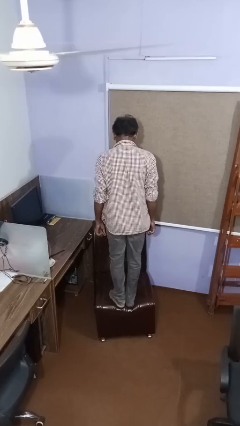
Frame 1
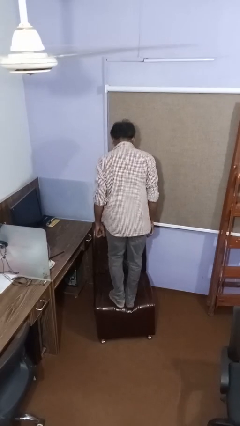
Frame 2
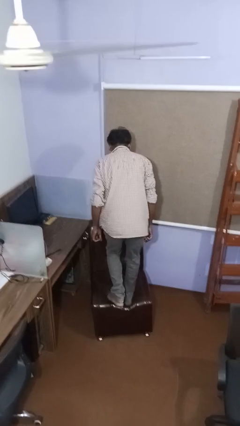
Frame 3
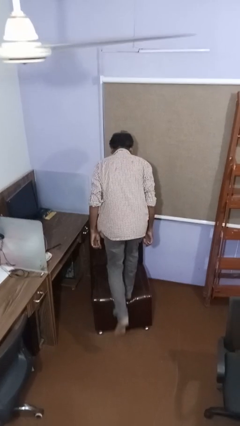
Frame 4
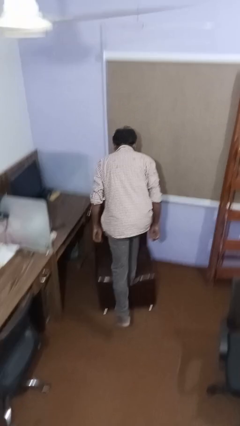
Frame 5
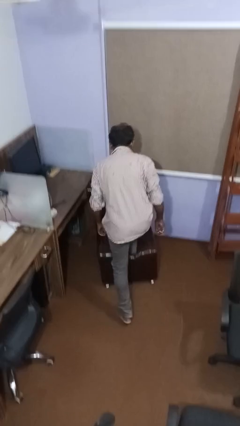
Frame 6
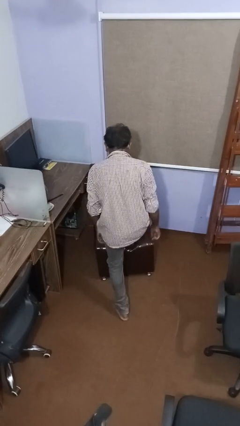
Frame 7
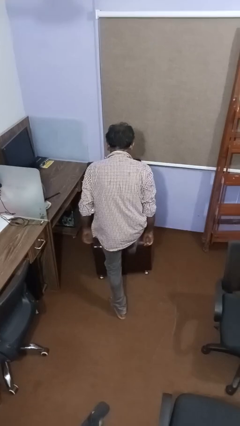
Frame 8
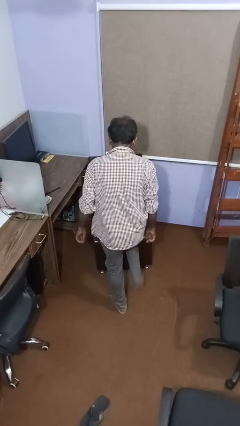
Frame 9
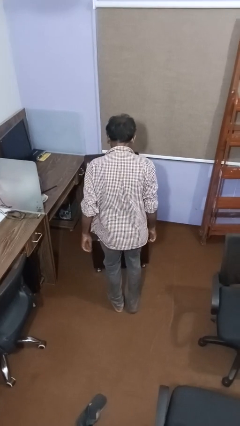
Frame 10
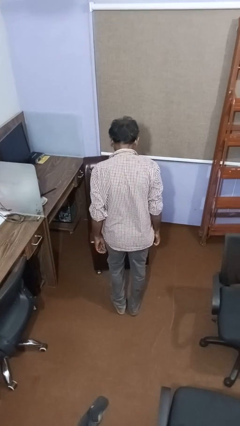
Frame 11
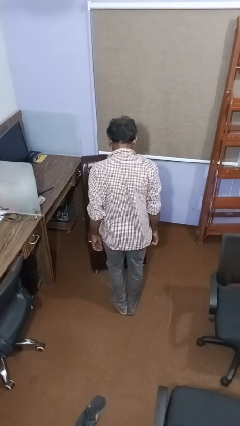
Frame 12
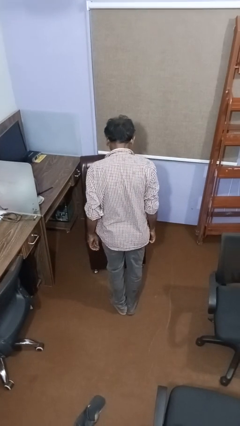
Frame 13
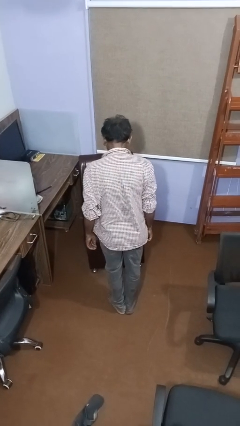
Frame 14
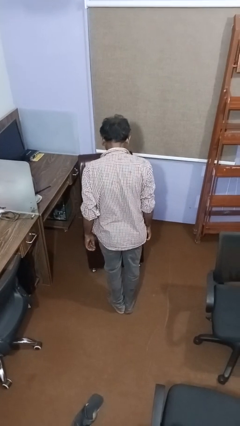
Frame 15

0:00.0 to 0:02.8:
person climbs off couch

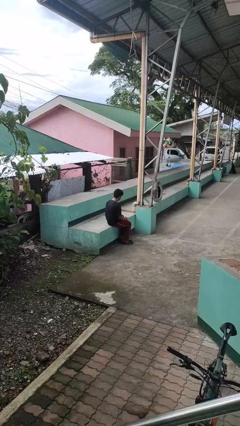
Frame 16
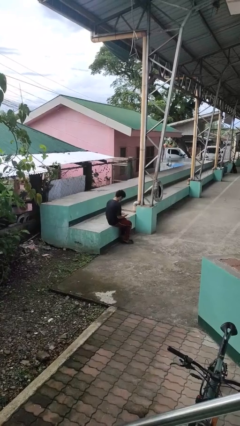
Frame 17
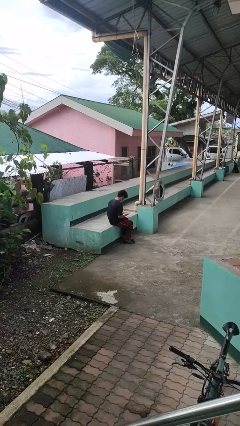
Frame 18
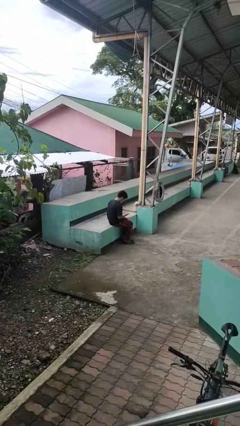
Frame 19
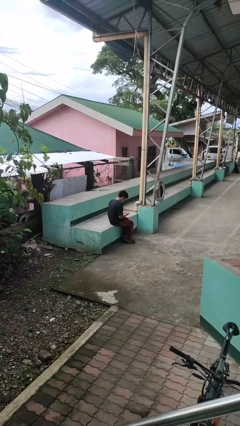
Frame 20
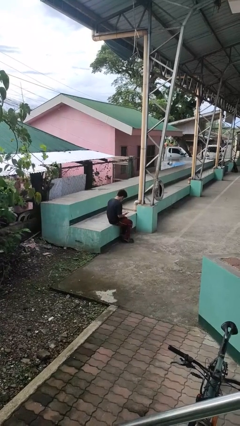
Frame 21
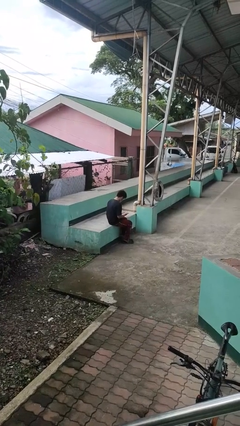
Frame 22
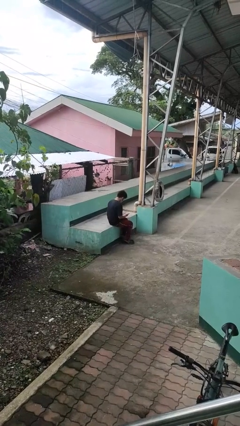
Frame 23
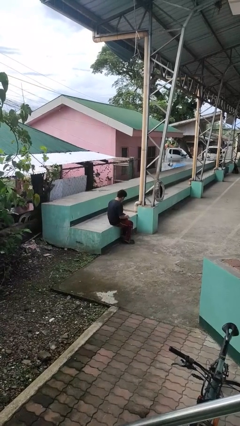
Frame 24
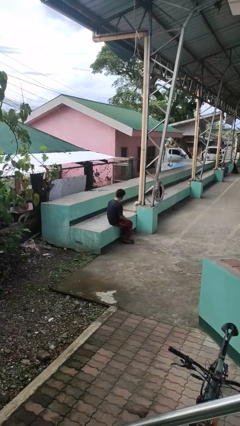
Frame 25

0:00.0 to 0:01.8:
person looks at hands in lap

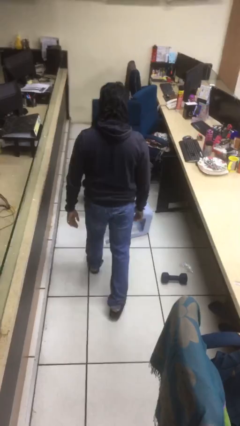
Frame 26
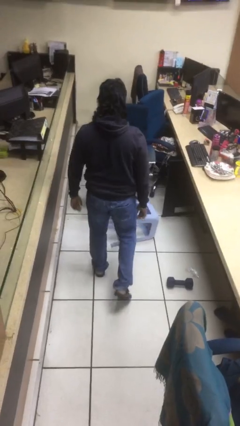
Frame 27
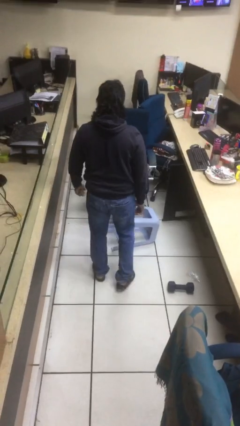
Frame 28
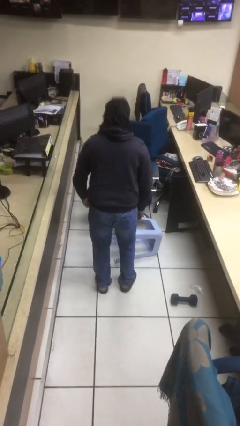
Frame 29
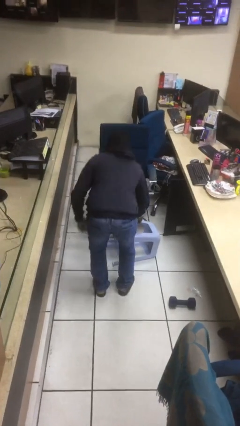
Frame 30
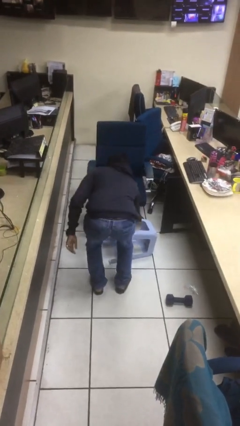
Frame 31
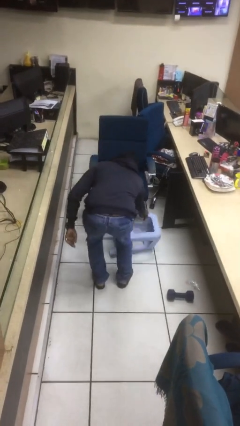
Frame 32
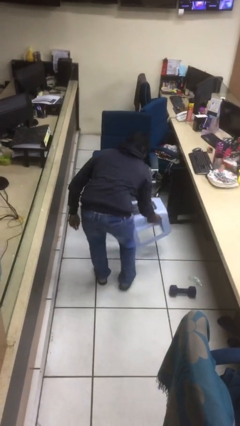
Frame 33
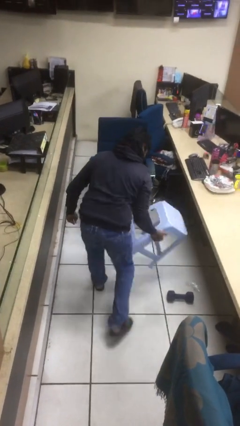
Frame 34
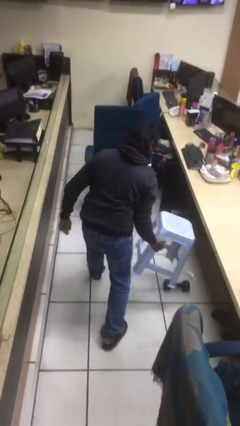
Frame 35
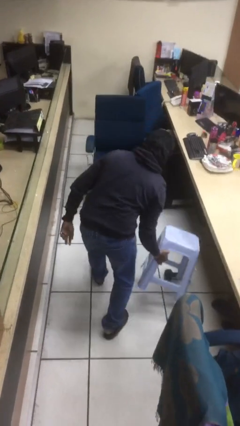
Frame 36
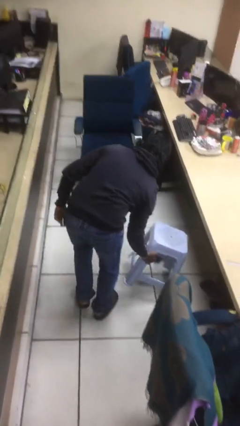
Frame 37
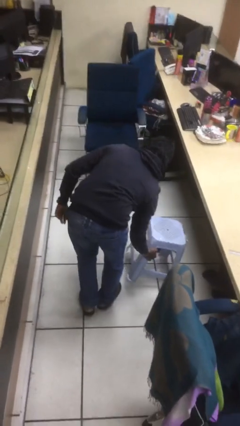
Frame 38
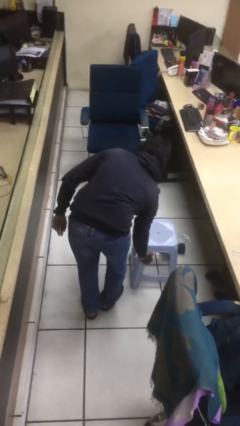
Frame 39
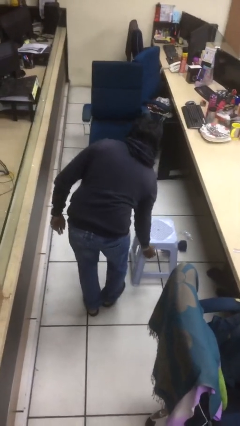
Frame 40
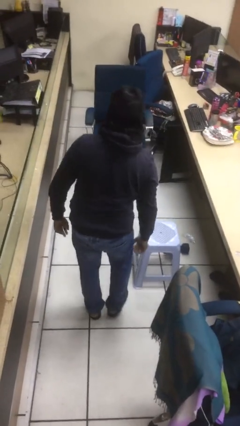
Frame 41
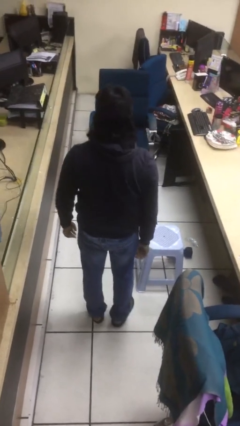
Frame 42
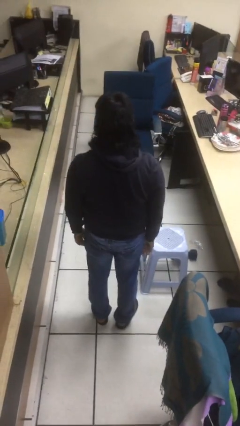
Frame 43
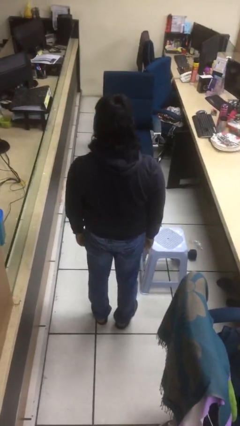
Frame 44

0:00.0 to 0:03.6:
person sets upright furniture

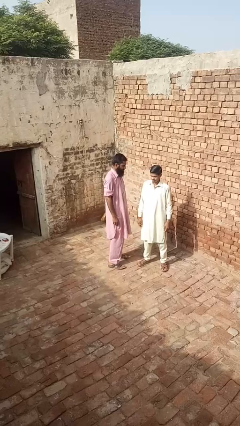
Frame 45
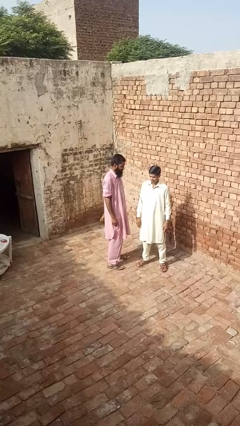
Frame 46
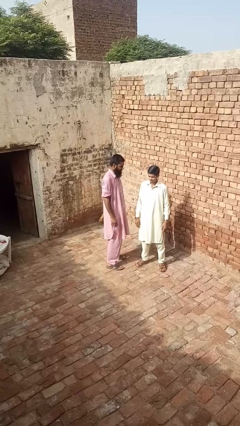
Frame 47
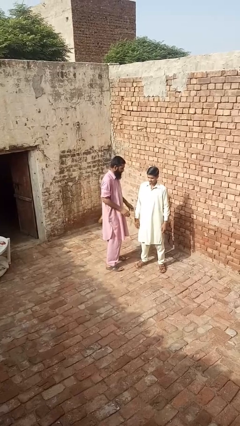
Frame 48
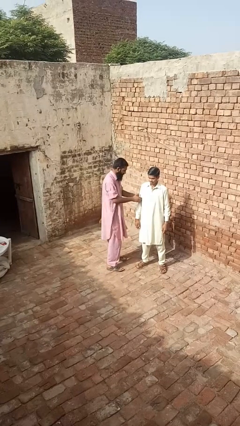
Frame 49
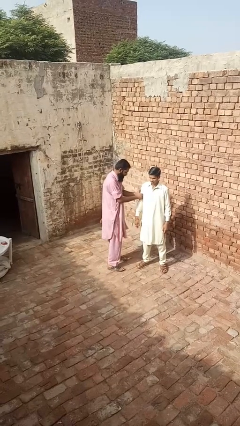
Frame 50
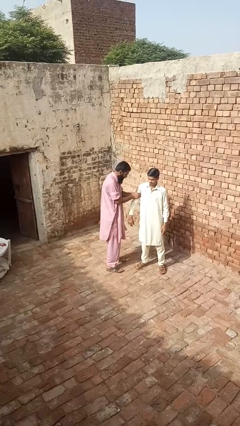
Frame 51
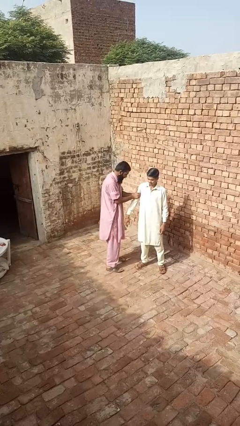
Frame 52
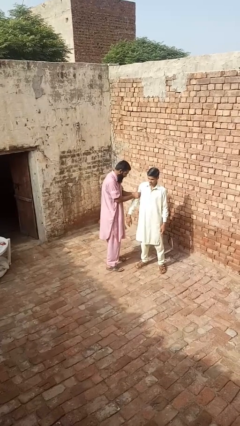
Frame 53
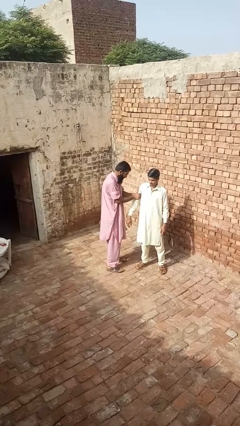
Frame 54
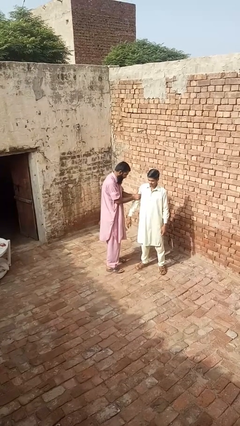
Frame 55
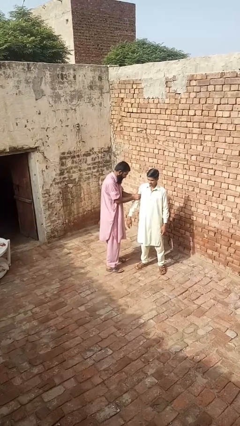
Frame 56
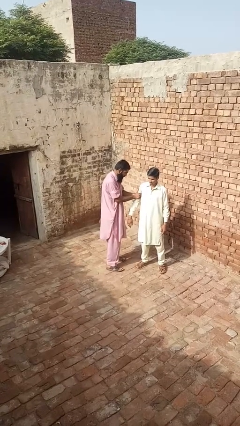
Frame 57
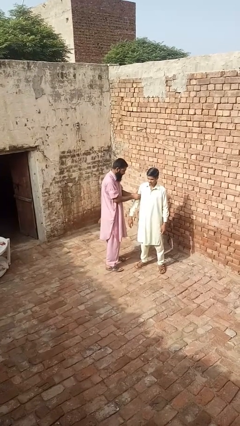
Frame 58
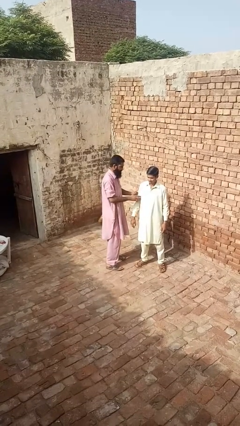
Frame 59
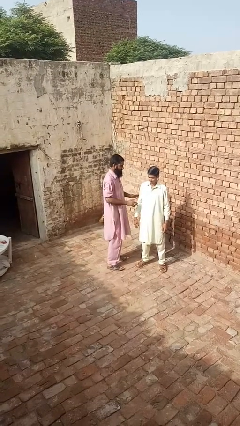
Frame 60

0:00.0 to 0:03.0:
person grabs person by bicep

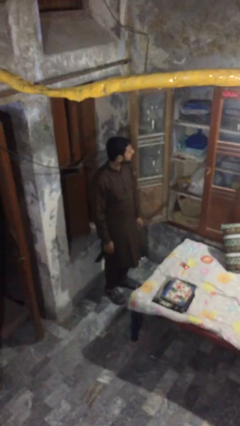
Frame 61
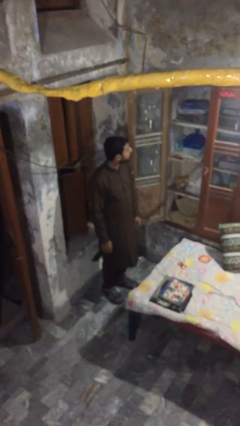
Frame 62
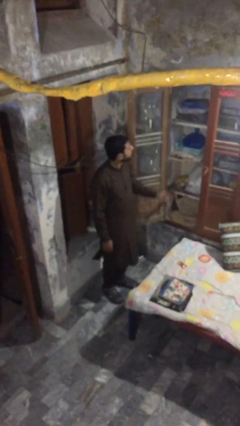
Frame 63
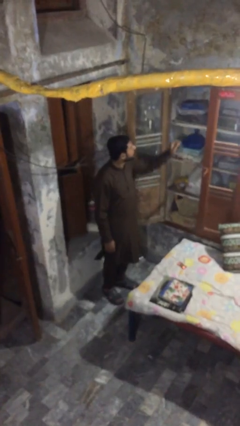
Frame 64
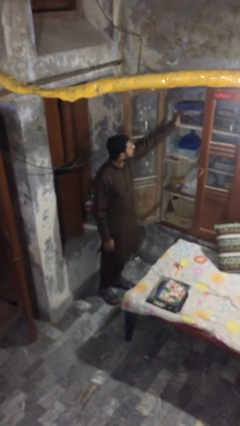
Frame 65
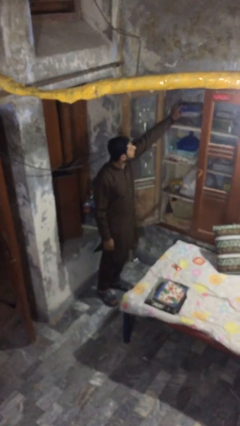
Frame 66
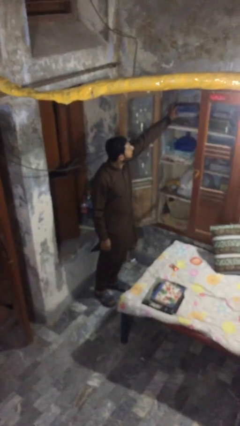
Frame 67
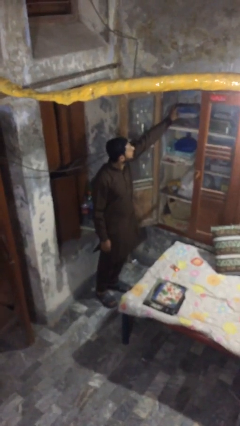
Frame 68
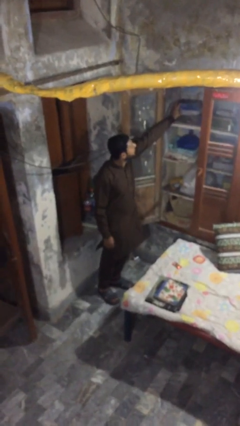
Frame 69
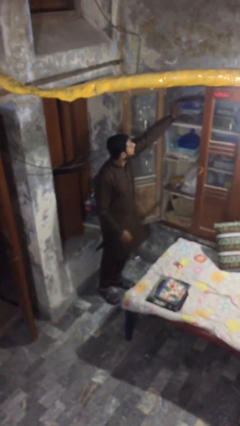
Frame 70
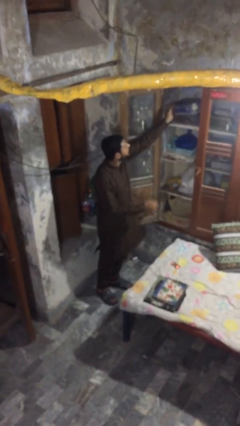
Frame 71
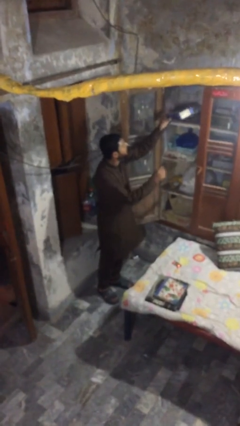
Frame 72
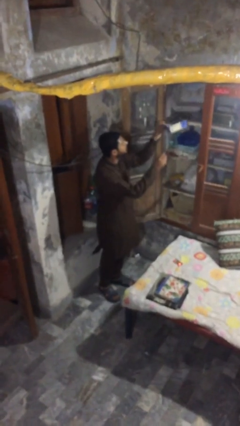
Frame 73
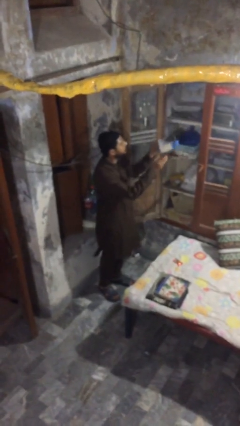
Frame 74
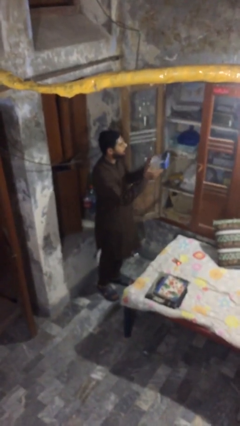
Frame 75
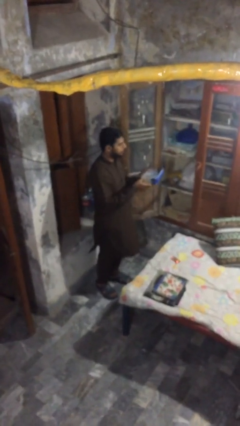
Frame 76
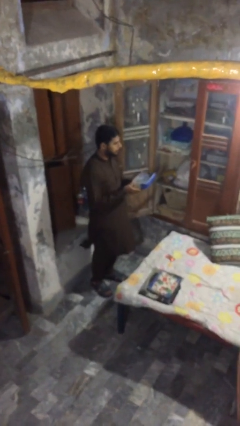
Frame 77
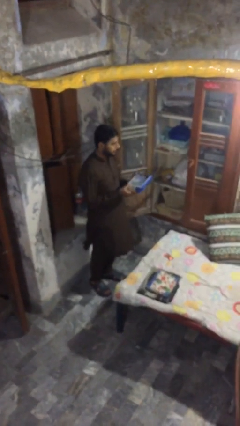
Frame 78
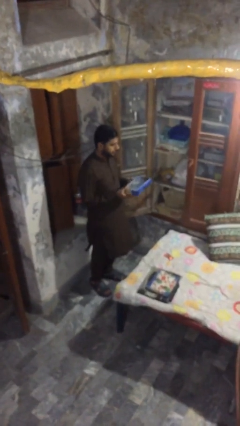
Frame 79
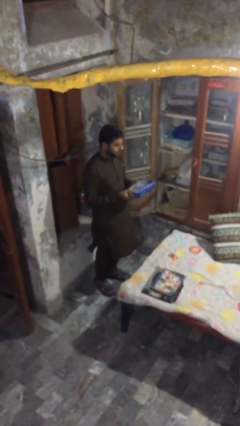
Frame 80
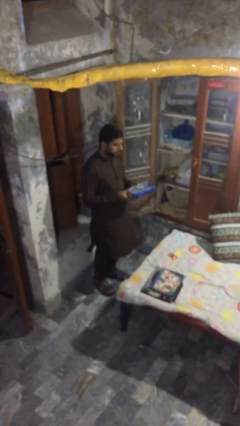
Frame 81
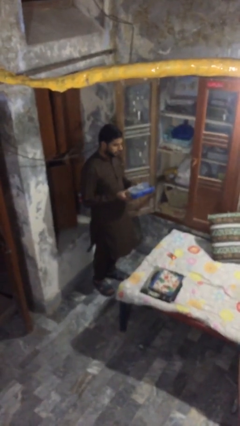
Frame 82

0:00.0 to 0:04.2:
person picks up object from shelf

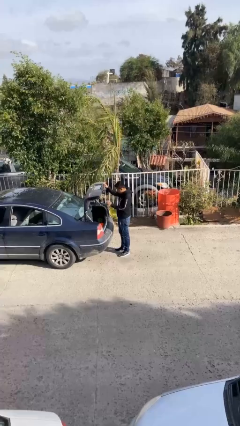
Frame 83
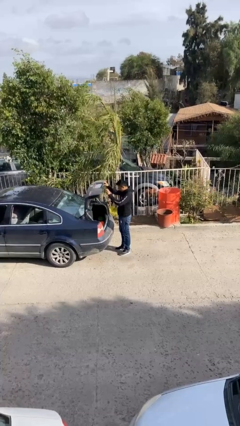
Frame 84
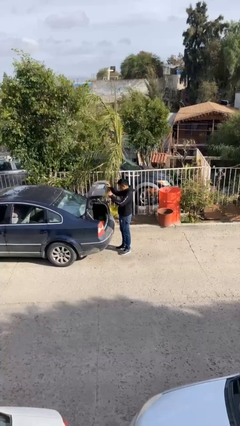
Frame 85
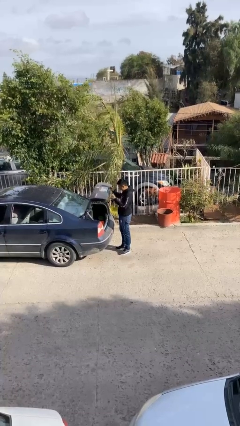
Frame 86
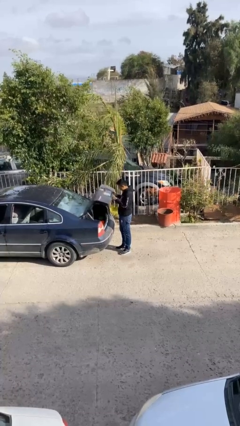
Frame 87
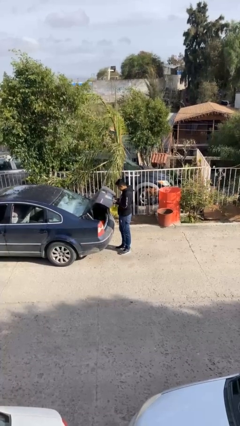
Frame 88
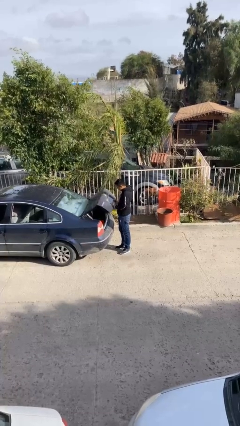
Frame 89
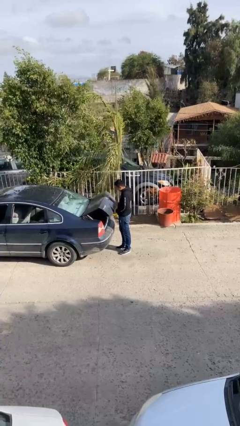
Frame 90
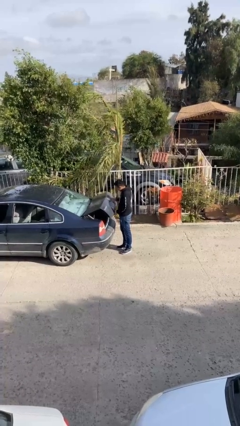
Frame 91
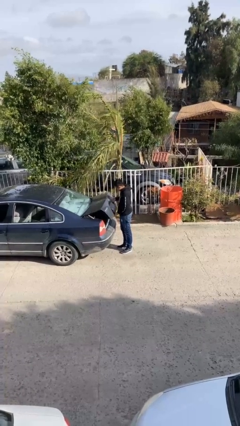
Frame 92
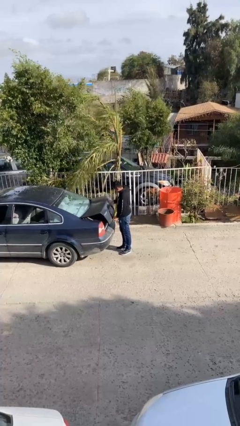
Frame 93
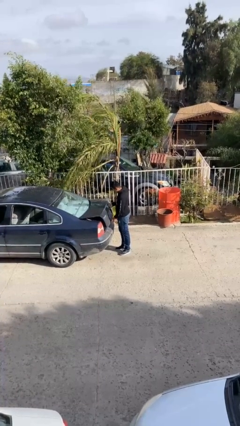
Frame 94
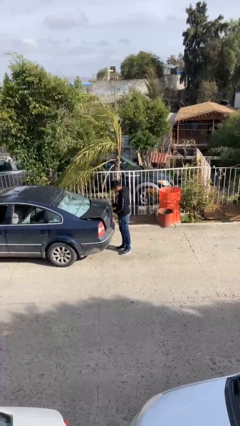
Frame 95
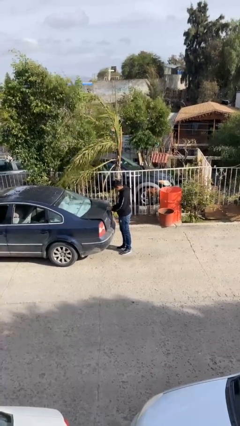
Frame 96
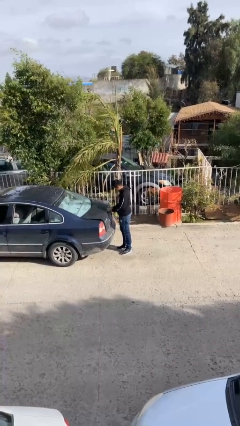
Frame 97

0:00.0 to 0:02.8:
person closes car trunk
